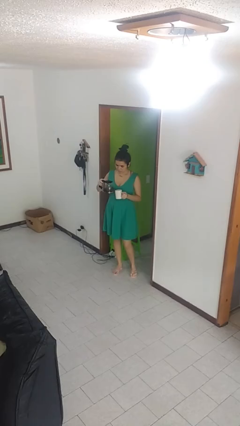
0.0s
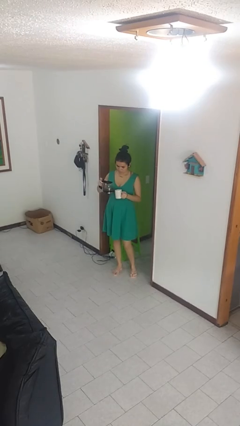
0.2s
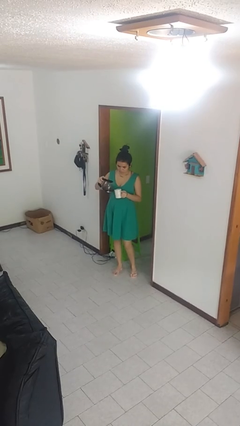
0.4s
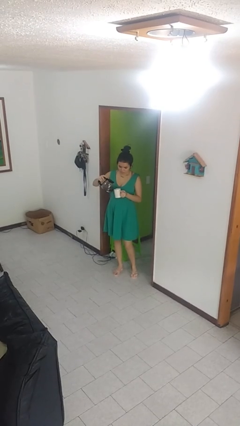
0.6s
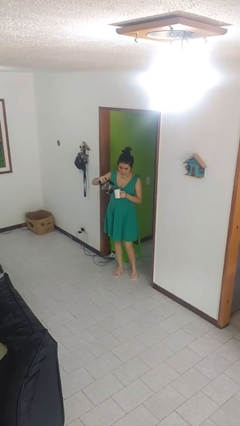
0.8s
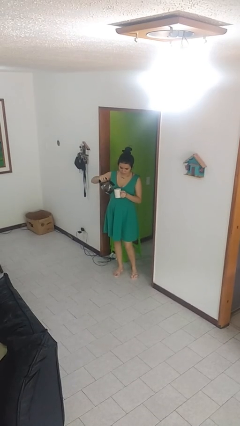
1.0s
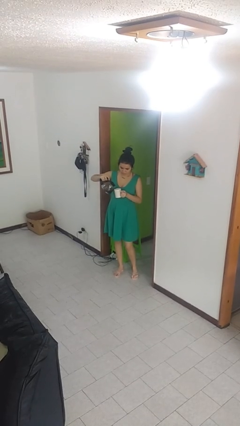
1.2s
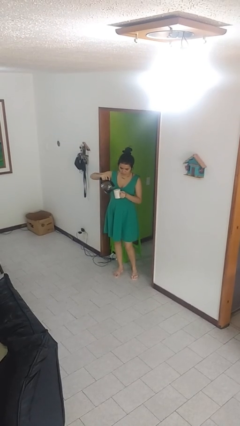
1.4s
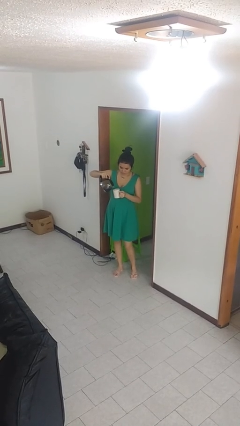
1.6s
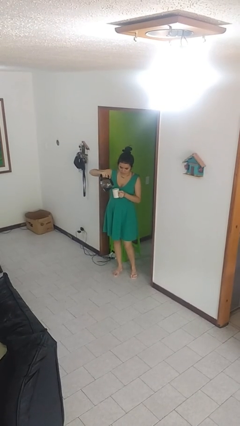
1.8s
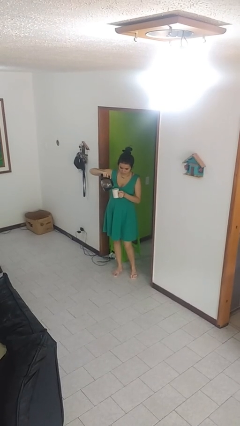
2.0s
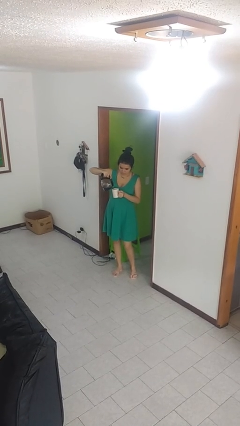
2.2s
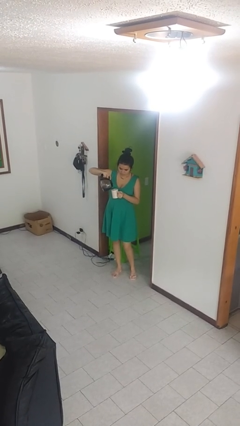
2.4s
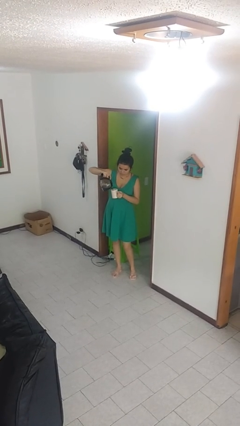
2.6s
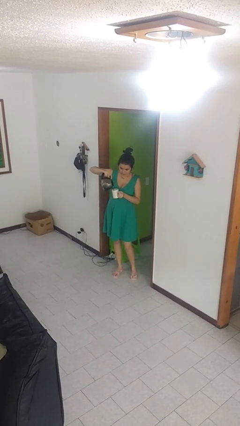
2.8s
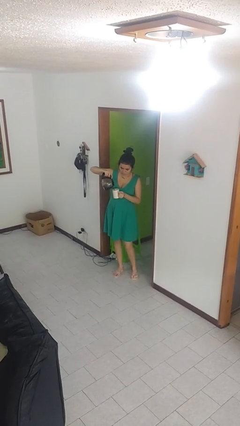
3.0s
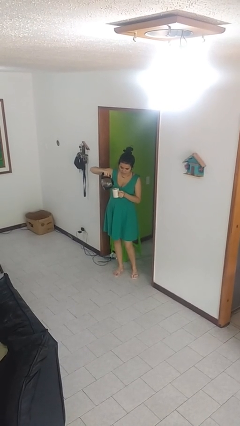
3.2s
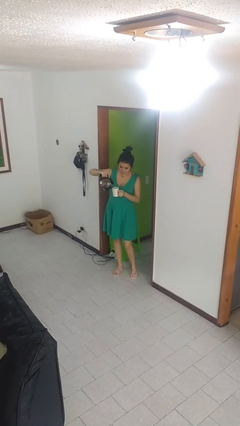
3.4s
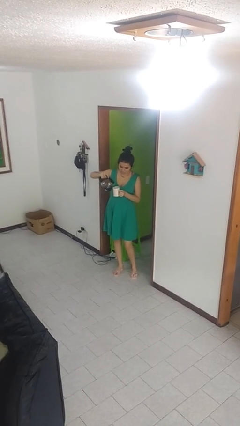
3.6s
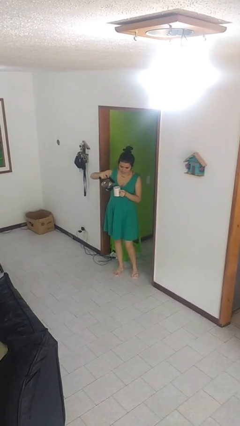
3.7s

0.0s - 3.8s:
person pours coffee into mug

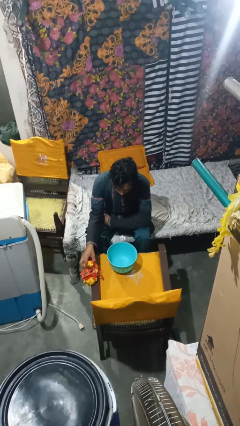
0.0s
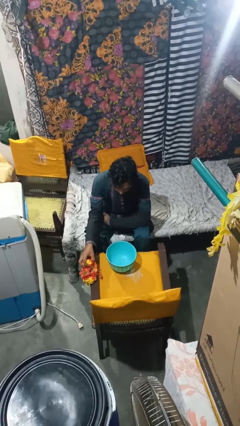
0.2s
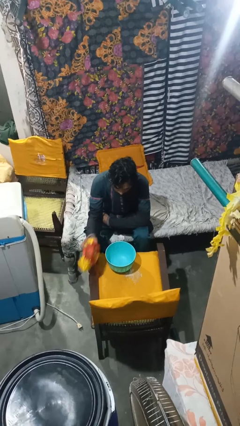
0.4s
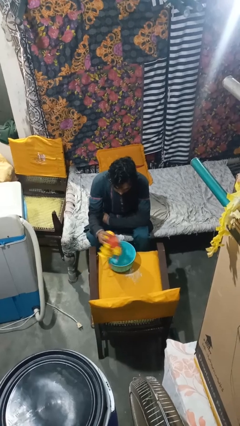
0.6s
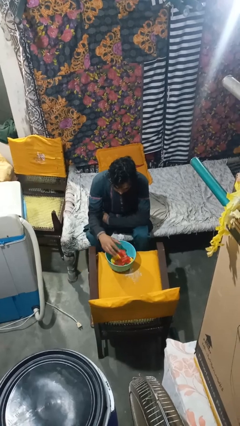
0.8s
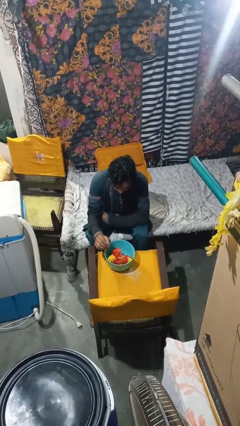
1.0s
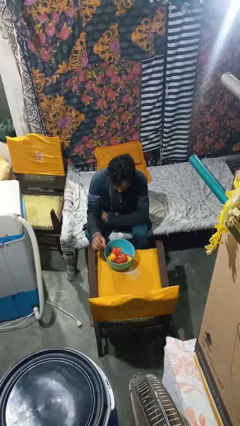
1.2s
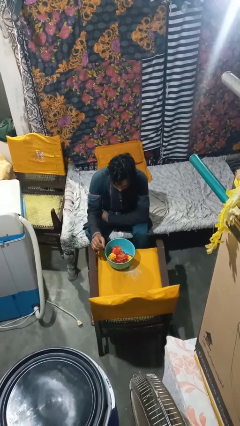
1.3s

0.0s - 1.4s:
person pours into bowl

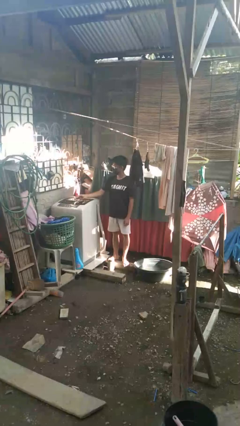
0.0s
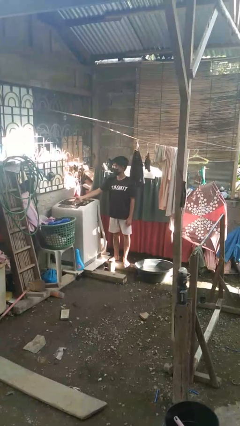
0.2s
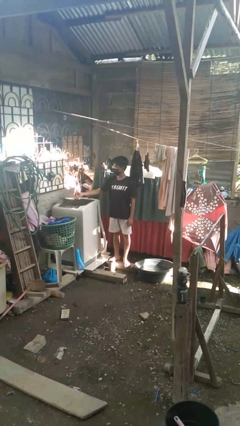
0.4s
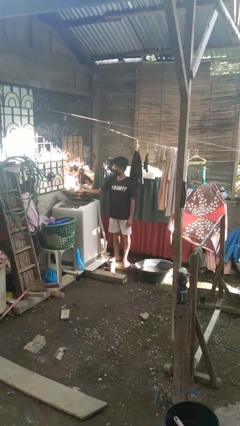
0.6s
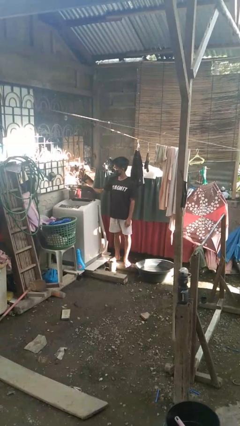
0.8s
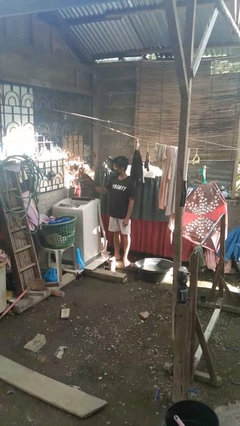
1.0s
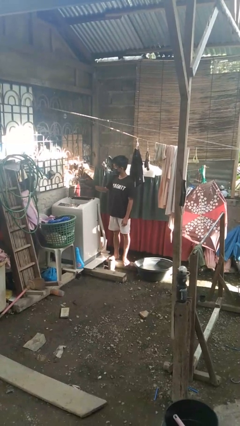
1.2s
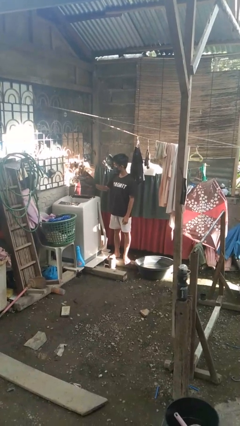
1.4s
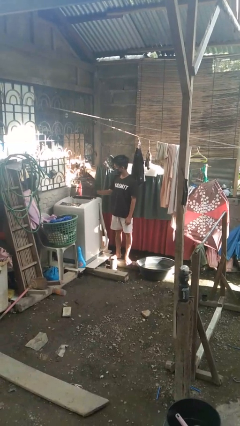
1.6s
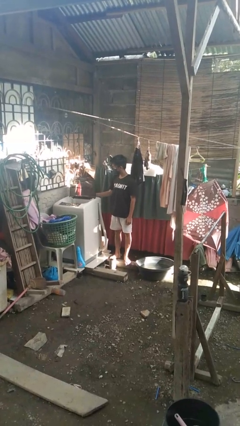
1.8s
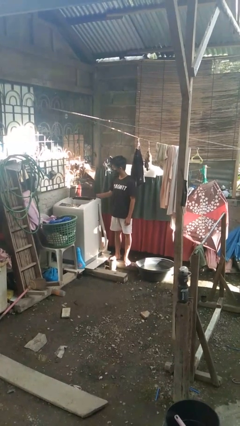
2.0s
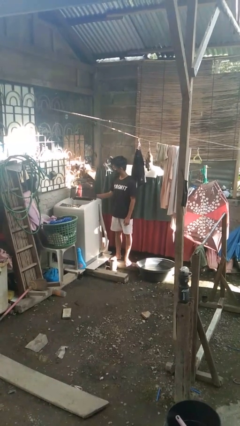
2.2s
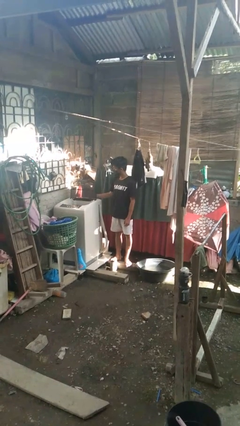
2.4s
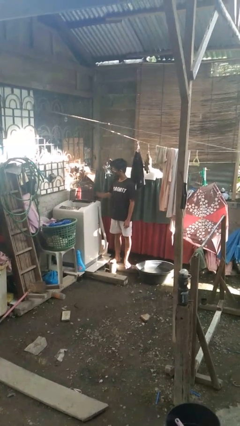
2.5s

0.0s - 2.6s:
person opens clothes washer

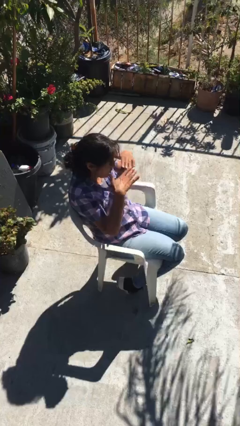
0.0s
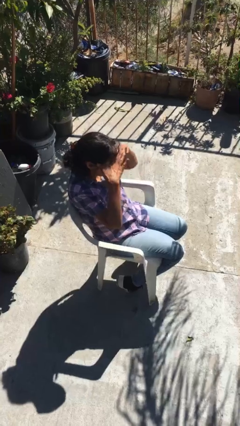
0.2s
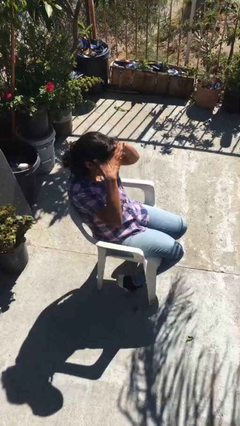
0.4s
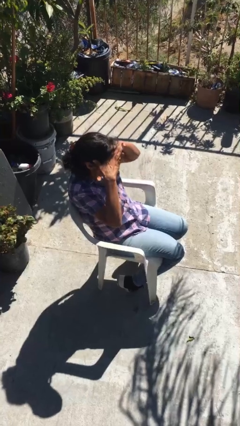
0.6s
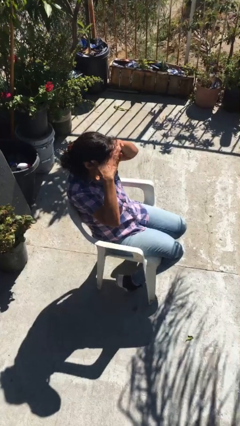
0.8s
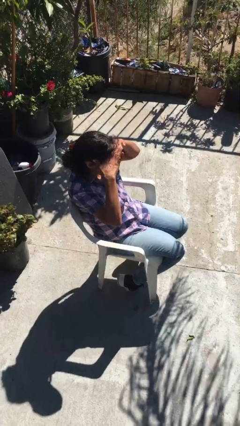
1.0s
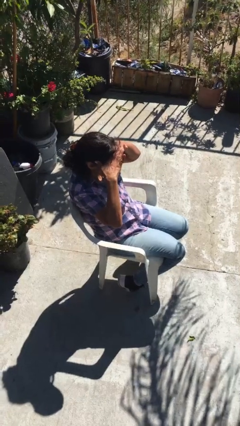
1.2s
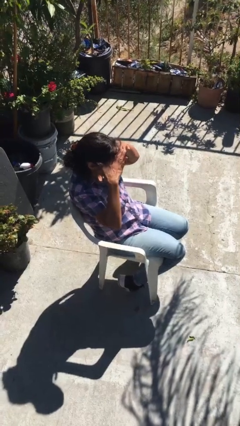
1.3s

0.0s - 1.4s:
person shades eyes

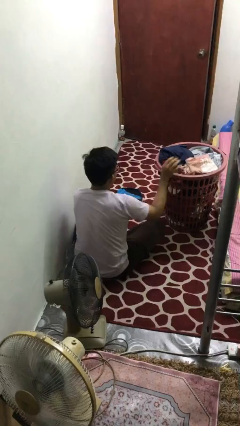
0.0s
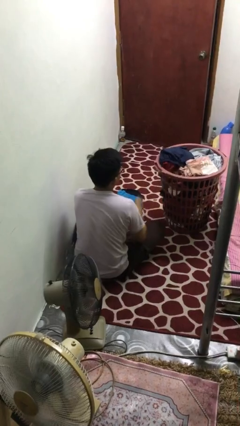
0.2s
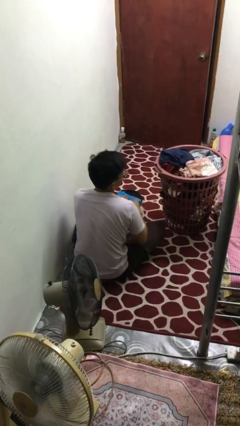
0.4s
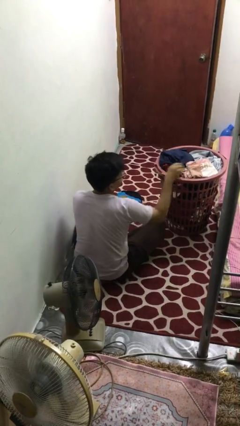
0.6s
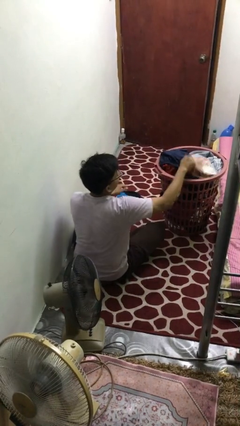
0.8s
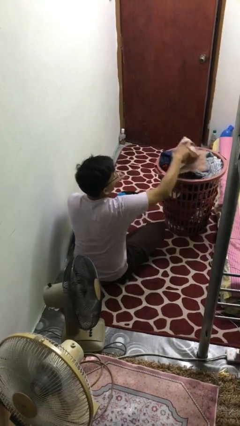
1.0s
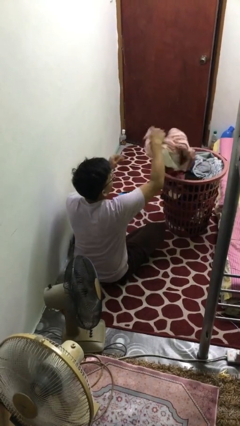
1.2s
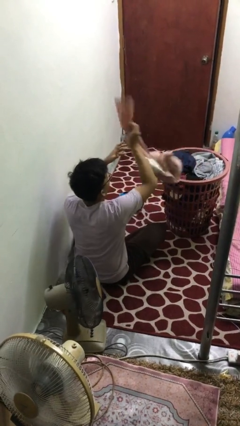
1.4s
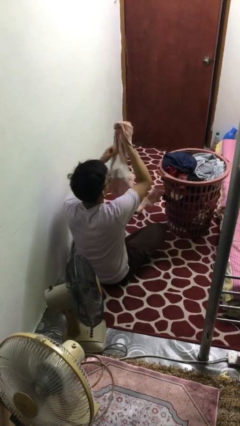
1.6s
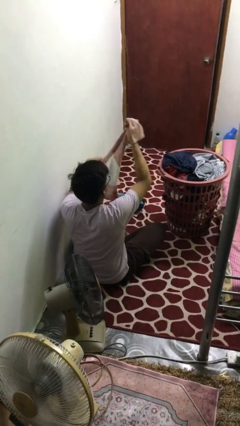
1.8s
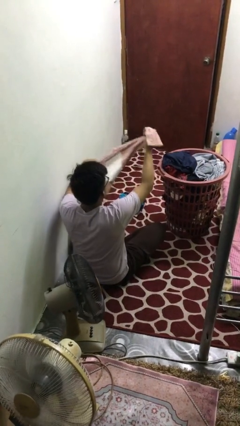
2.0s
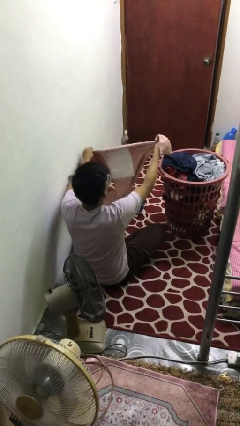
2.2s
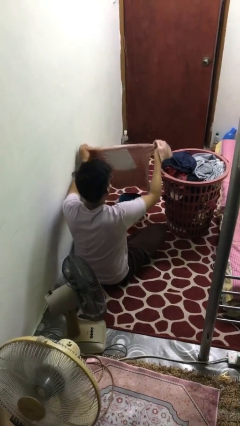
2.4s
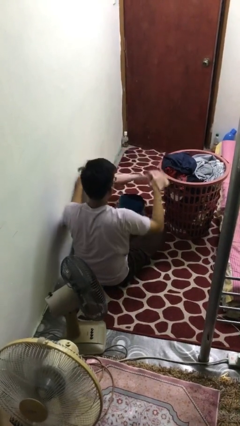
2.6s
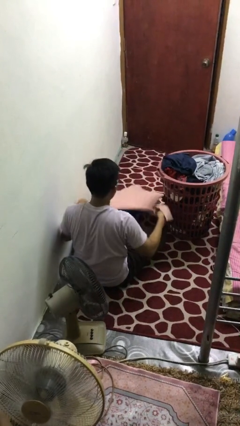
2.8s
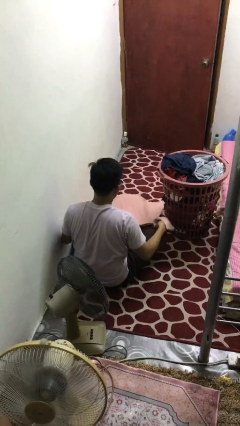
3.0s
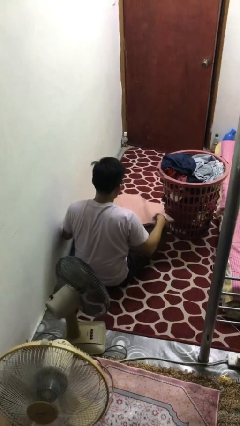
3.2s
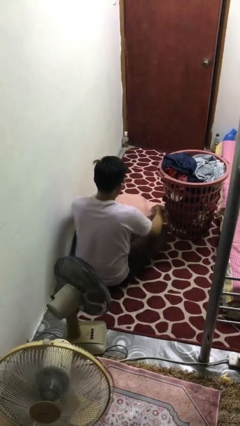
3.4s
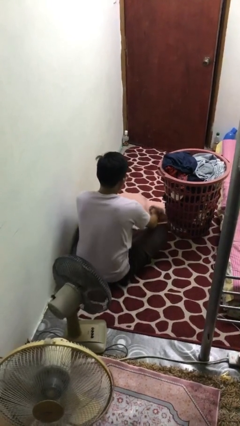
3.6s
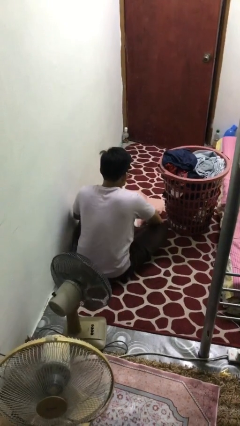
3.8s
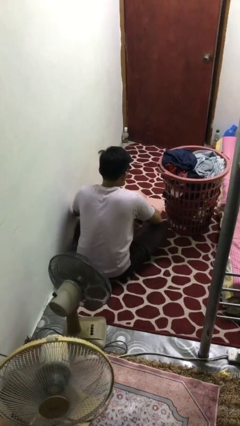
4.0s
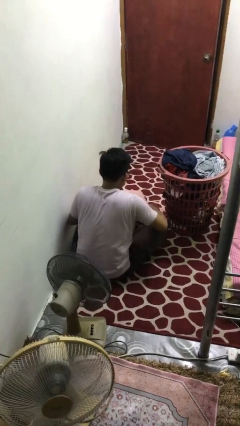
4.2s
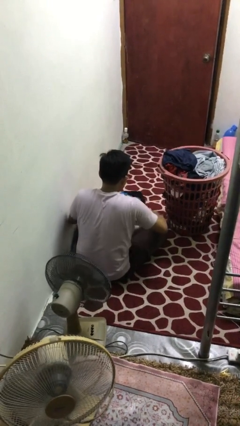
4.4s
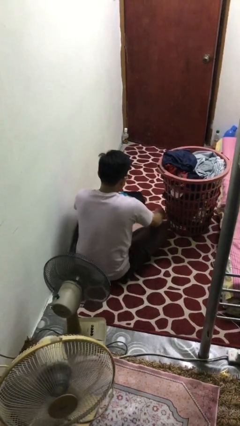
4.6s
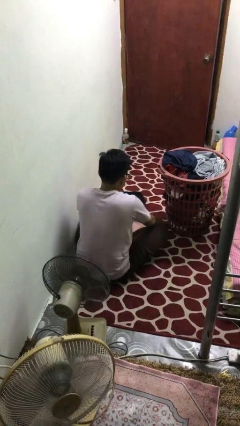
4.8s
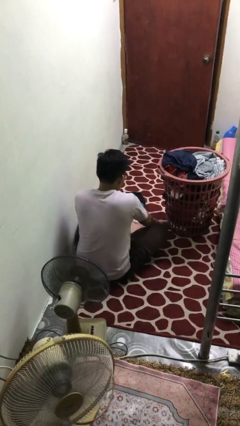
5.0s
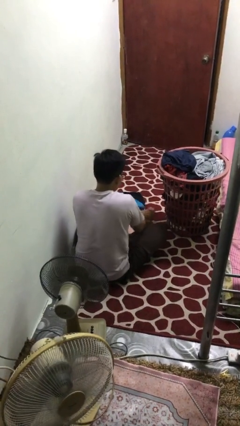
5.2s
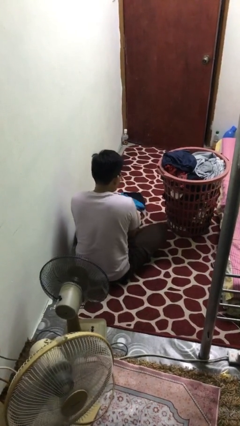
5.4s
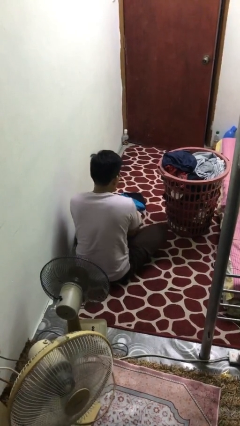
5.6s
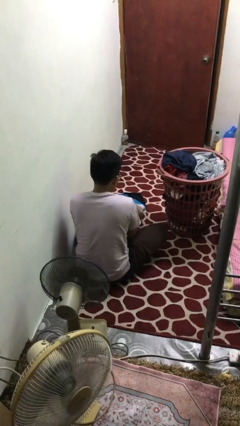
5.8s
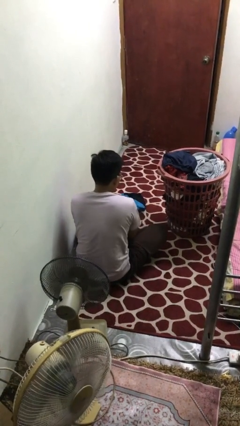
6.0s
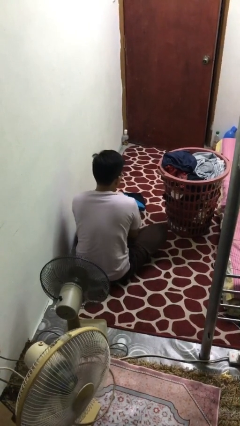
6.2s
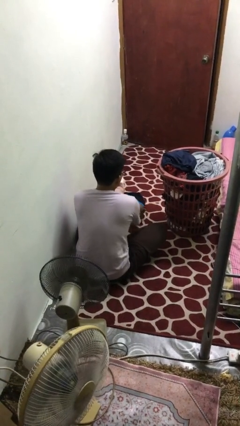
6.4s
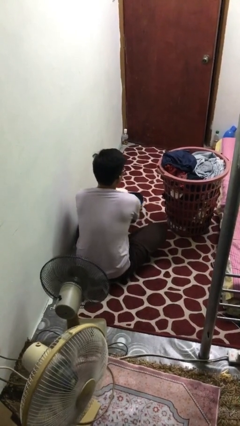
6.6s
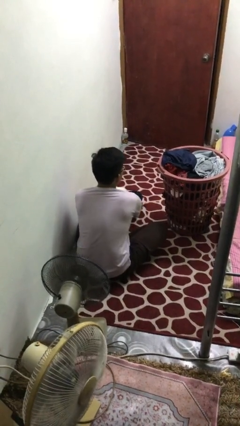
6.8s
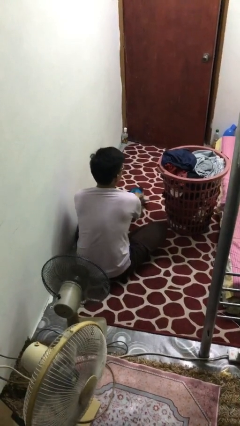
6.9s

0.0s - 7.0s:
person folds shirt

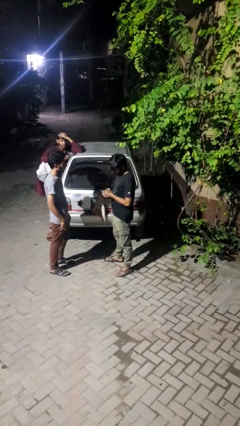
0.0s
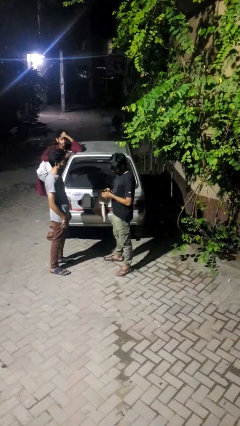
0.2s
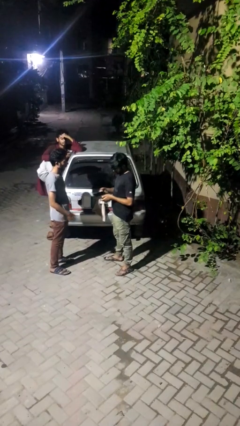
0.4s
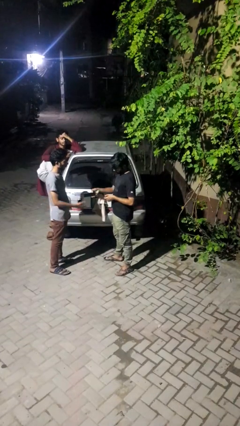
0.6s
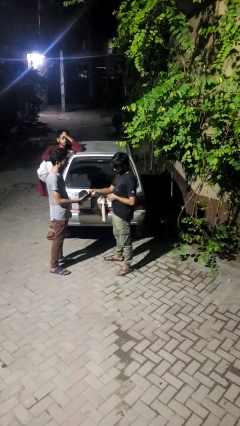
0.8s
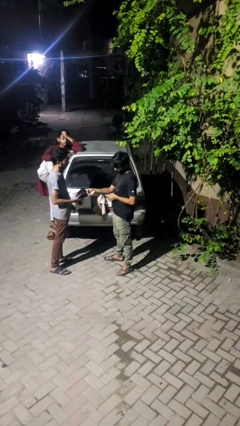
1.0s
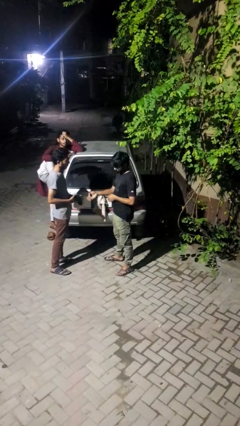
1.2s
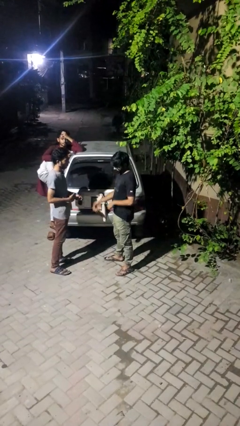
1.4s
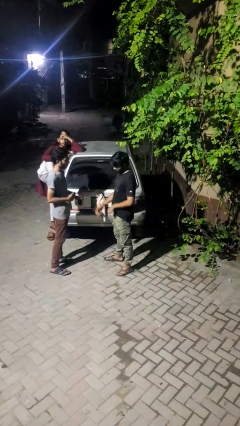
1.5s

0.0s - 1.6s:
person transfers object to person
